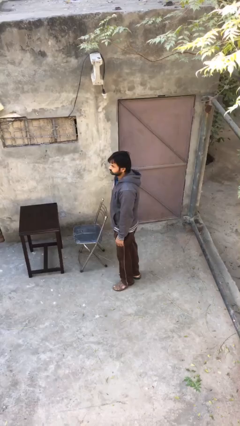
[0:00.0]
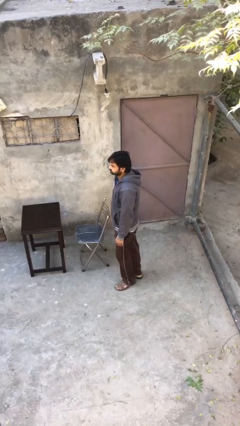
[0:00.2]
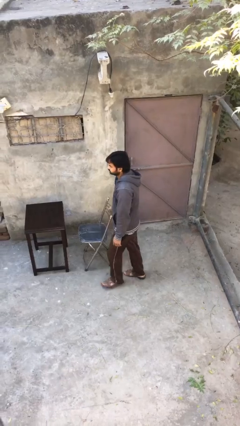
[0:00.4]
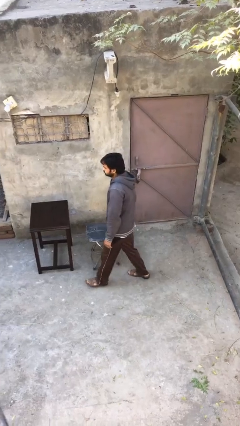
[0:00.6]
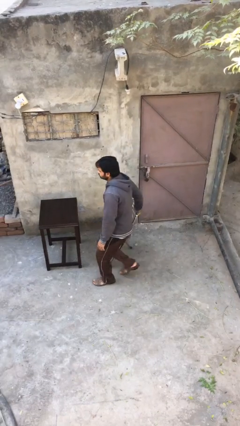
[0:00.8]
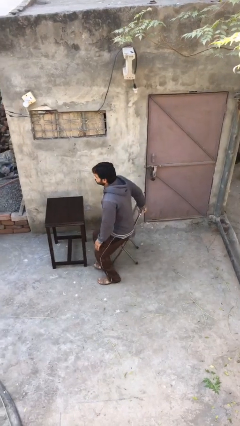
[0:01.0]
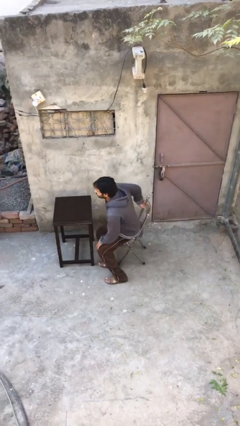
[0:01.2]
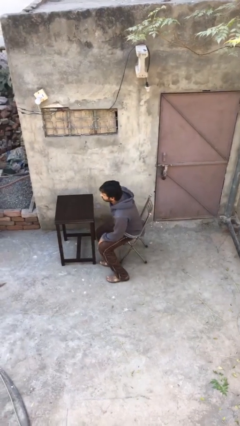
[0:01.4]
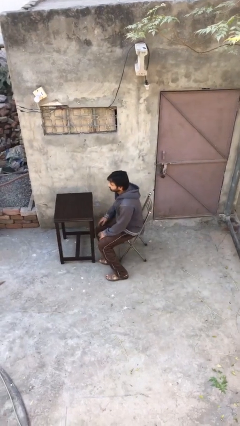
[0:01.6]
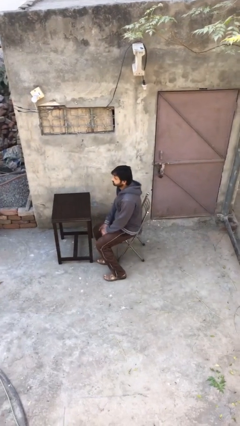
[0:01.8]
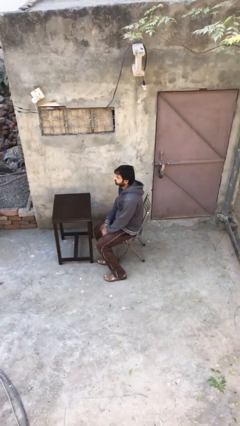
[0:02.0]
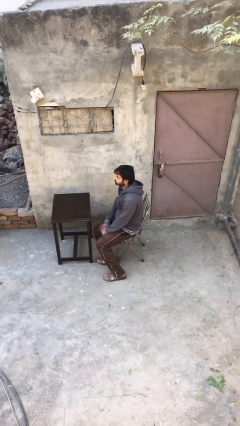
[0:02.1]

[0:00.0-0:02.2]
person sits down

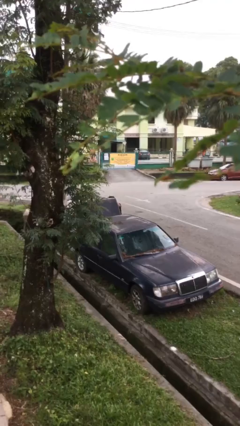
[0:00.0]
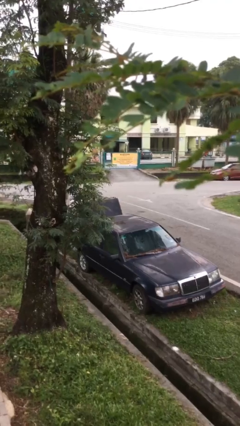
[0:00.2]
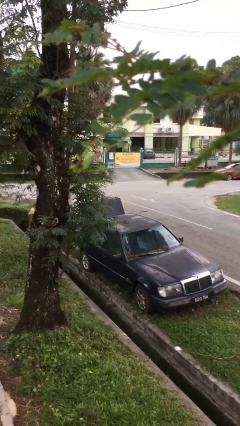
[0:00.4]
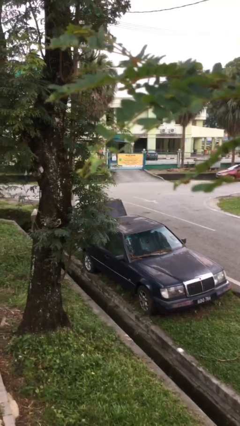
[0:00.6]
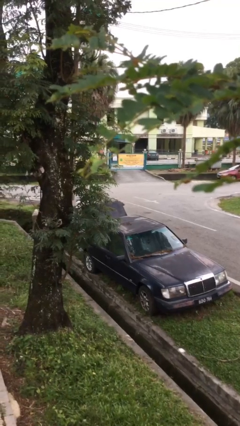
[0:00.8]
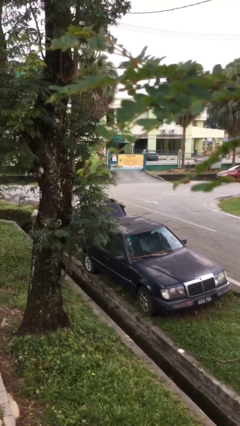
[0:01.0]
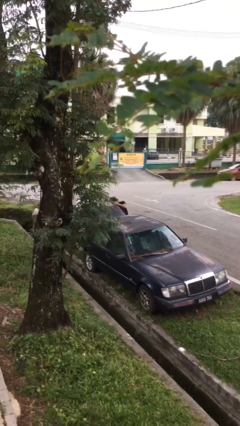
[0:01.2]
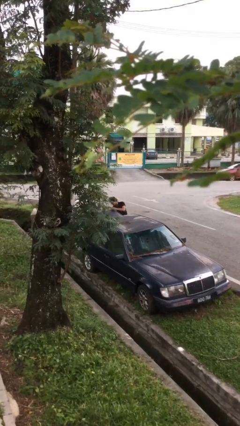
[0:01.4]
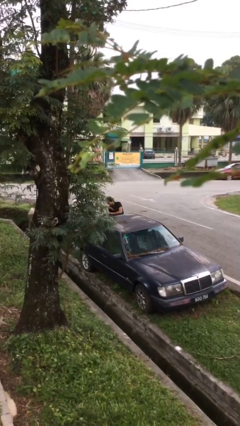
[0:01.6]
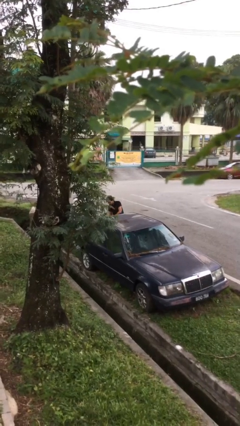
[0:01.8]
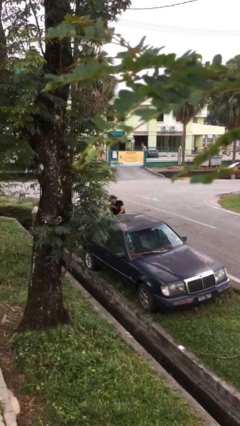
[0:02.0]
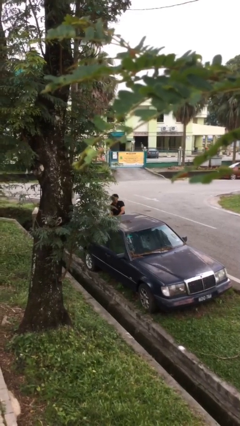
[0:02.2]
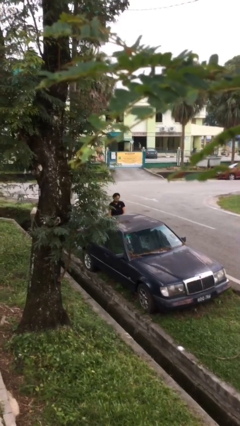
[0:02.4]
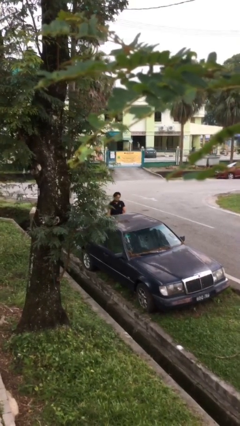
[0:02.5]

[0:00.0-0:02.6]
person closes car trunk

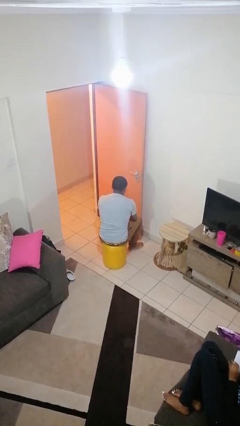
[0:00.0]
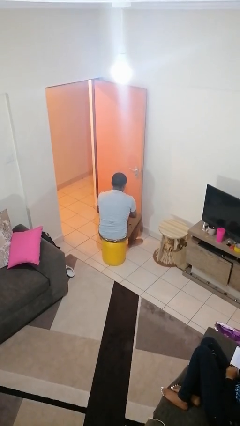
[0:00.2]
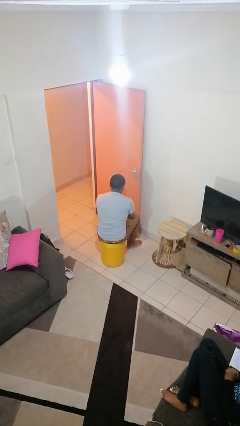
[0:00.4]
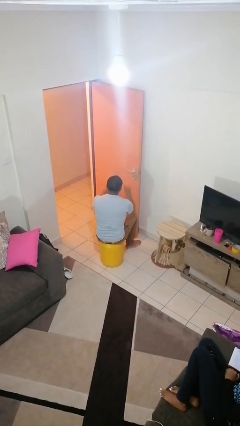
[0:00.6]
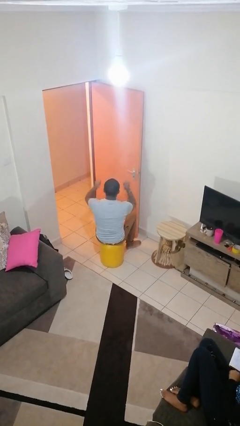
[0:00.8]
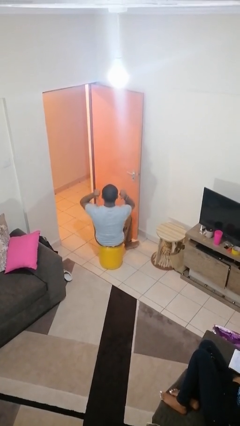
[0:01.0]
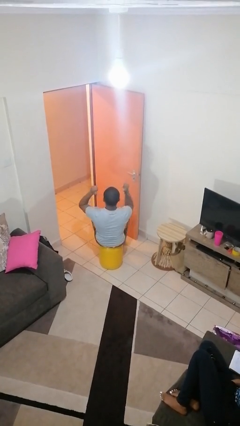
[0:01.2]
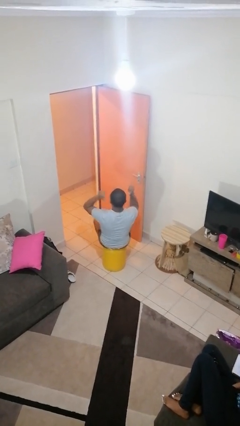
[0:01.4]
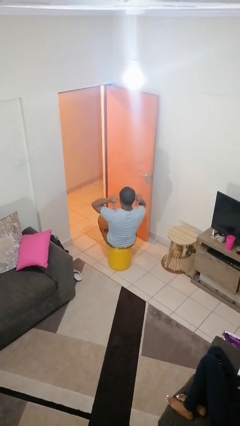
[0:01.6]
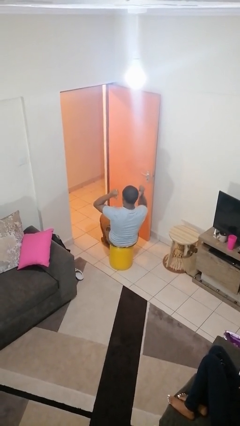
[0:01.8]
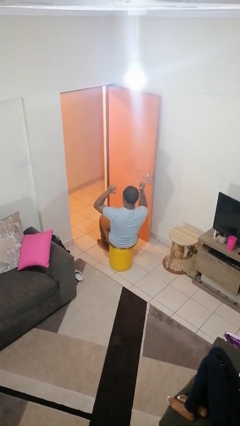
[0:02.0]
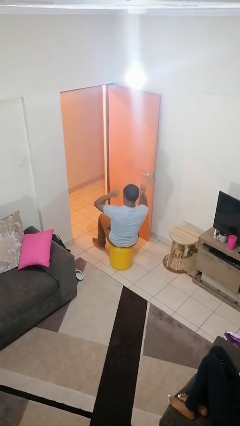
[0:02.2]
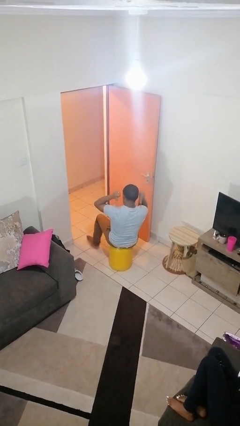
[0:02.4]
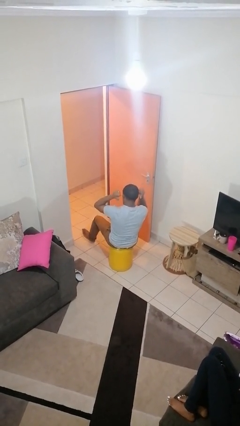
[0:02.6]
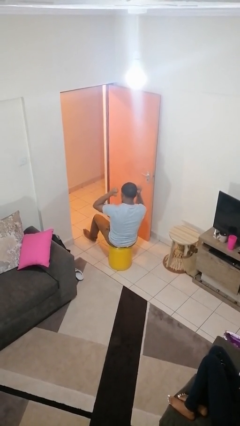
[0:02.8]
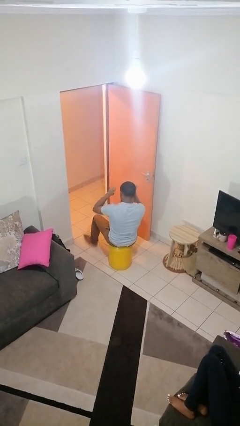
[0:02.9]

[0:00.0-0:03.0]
person gestures behind me

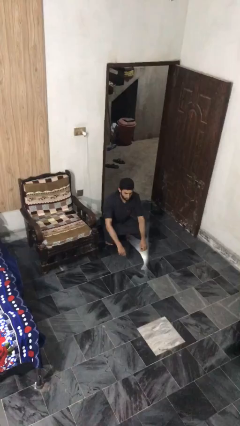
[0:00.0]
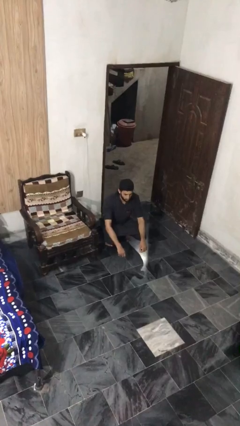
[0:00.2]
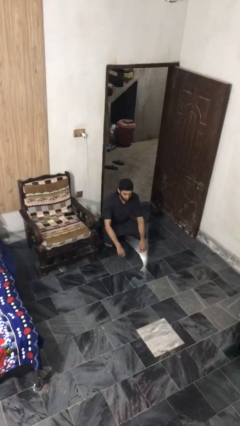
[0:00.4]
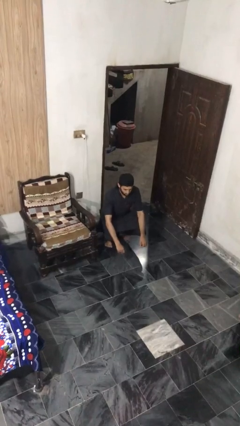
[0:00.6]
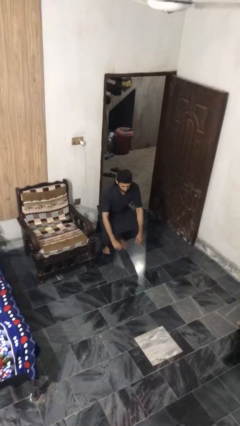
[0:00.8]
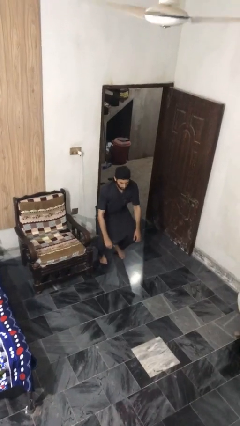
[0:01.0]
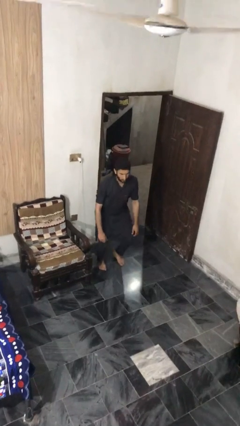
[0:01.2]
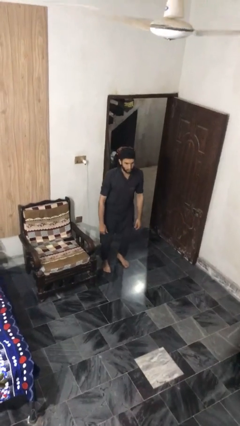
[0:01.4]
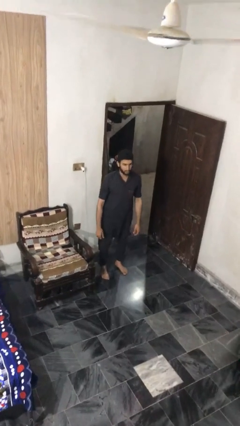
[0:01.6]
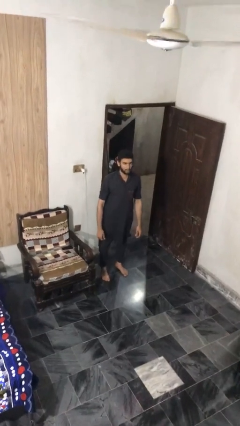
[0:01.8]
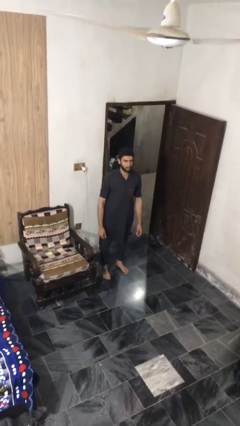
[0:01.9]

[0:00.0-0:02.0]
person stands up

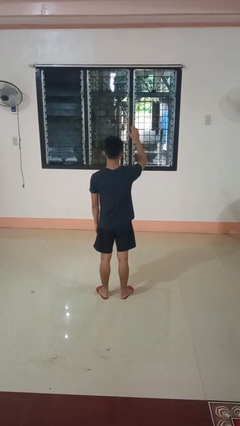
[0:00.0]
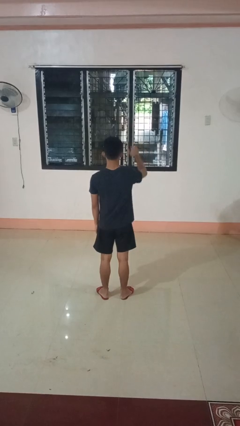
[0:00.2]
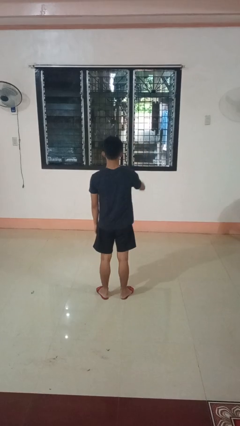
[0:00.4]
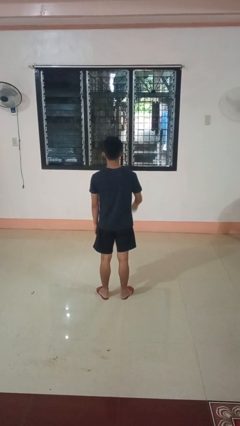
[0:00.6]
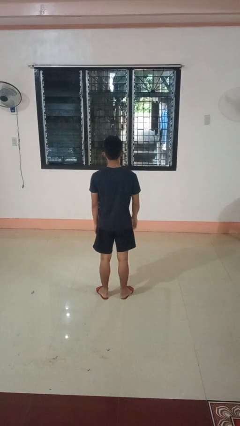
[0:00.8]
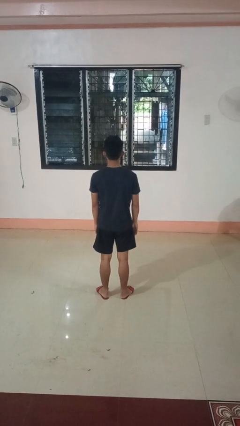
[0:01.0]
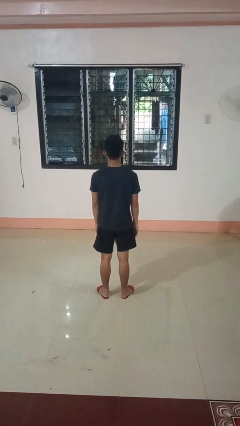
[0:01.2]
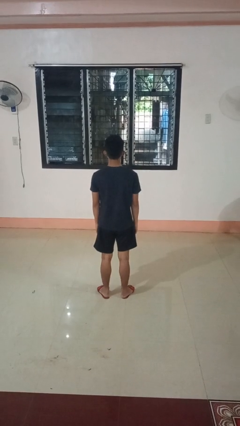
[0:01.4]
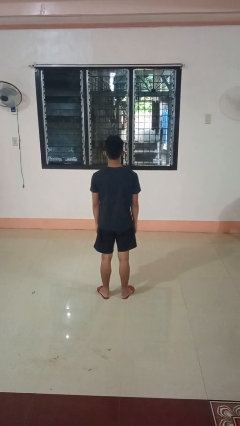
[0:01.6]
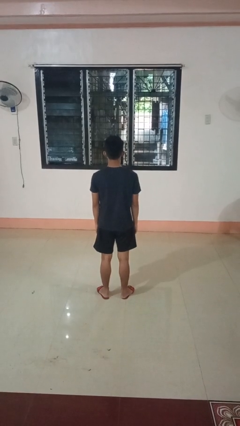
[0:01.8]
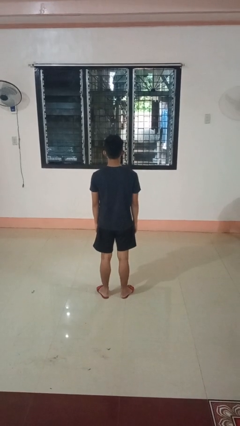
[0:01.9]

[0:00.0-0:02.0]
person gestures swipe down

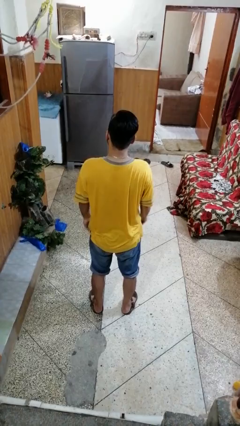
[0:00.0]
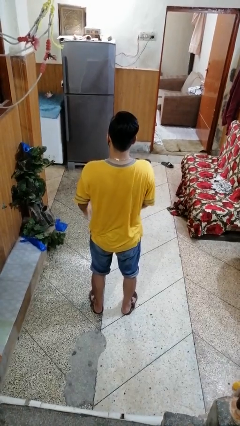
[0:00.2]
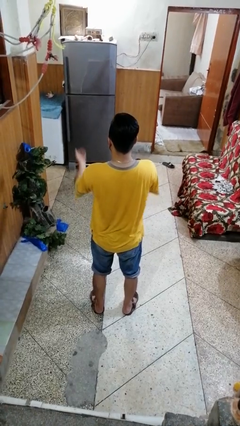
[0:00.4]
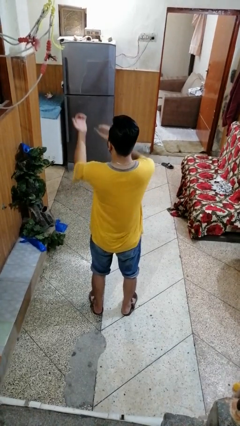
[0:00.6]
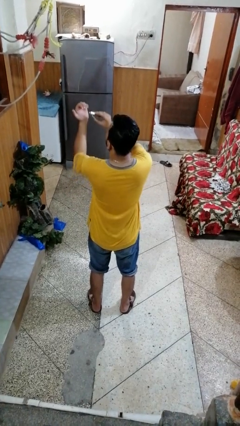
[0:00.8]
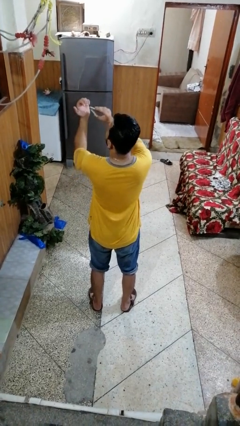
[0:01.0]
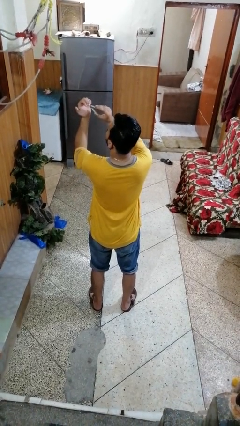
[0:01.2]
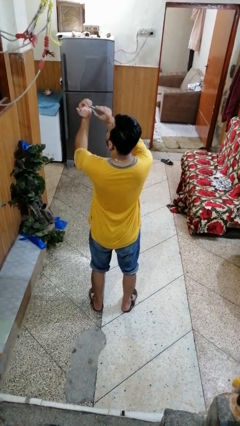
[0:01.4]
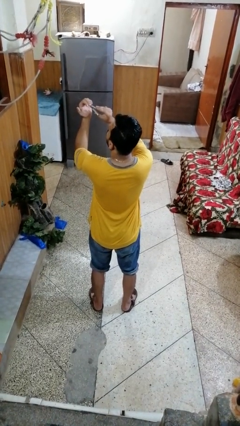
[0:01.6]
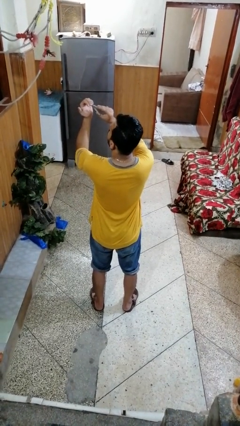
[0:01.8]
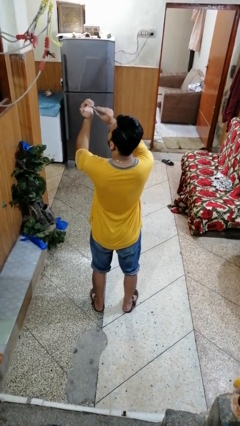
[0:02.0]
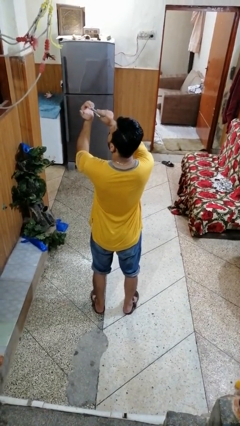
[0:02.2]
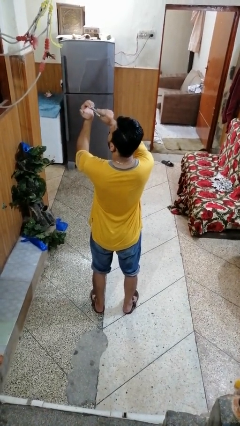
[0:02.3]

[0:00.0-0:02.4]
person clips fingernails

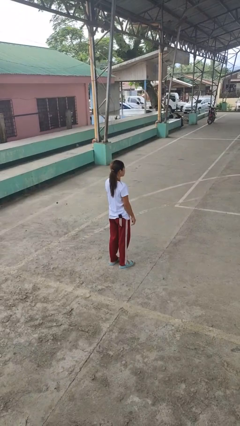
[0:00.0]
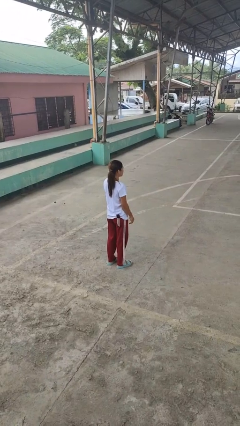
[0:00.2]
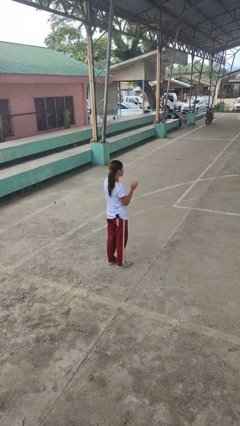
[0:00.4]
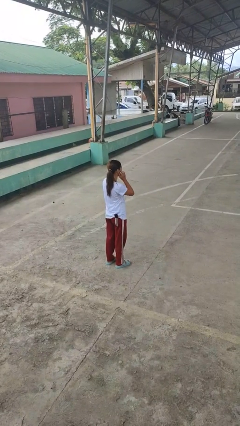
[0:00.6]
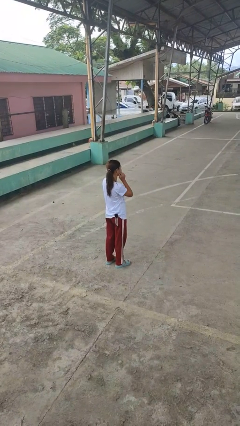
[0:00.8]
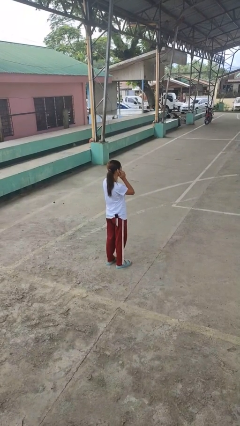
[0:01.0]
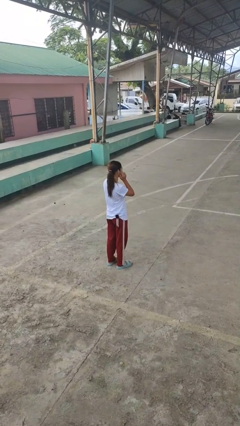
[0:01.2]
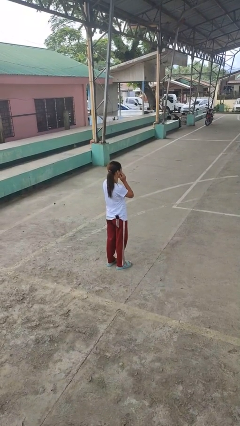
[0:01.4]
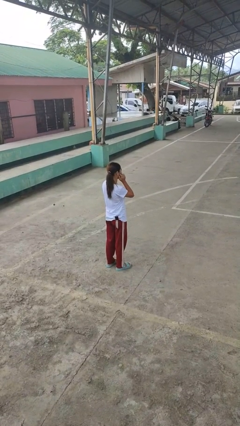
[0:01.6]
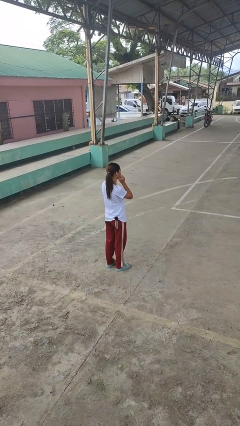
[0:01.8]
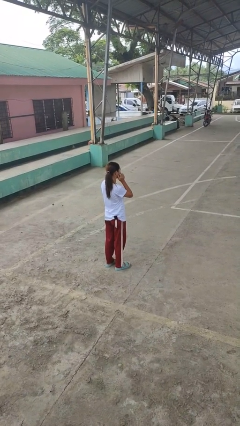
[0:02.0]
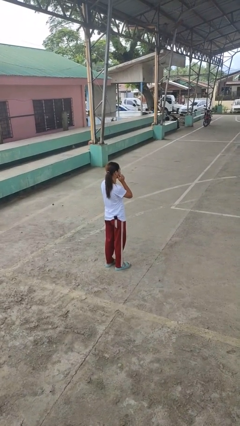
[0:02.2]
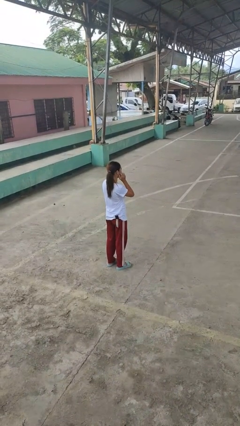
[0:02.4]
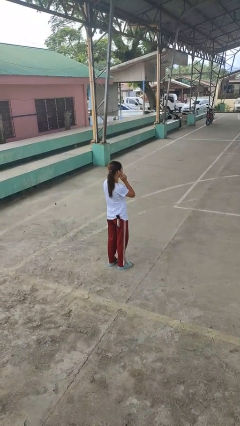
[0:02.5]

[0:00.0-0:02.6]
person scratches face

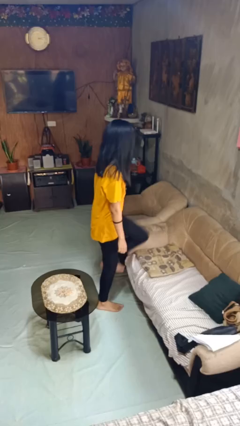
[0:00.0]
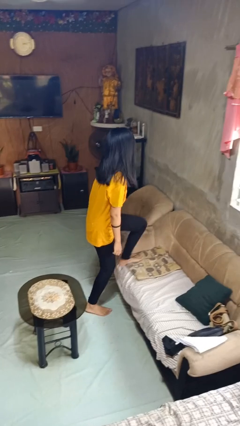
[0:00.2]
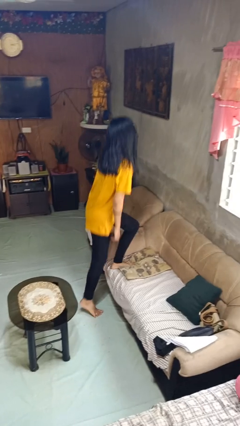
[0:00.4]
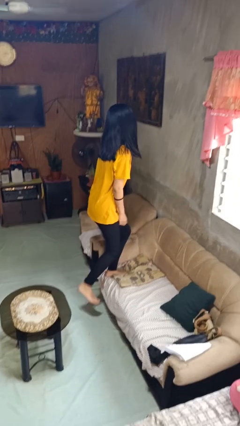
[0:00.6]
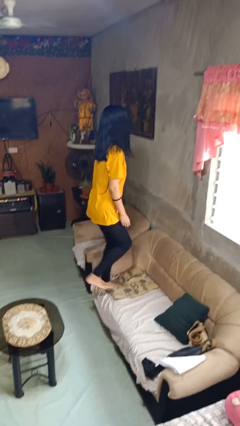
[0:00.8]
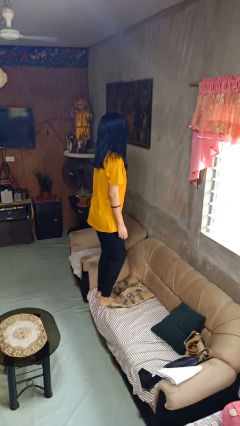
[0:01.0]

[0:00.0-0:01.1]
person climbs on couch
